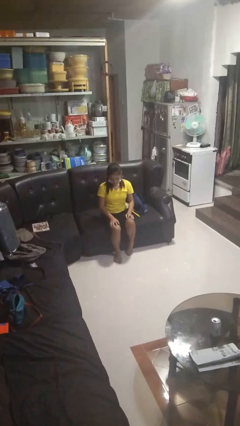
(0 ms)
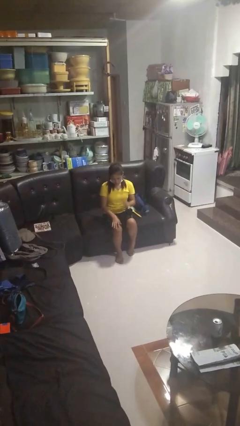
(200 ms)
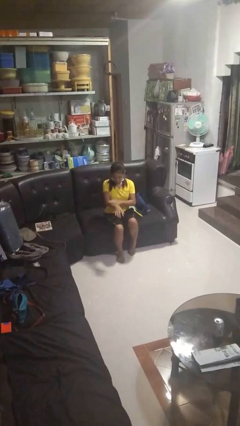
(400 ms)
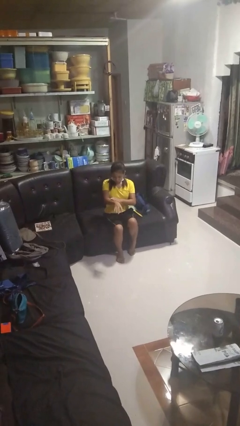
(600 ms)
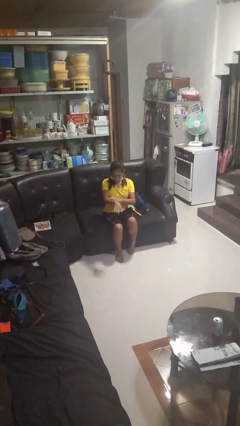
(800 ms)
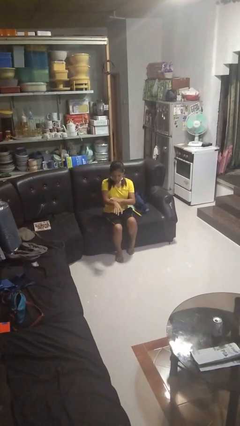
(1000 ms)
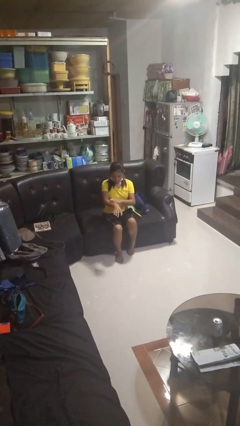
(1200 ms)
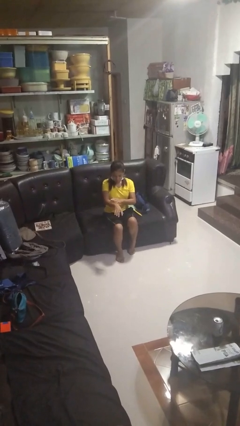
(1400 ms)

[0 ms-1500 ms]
person swats bug

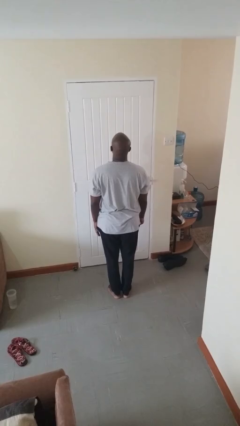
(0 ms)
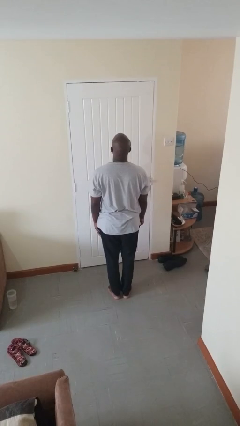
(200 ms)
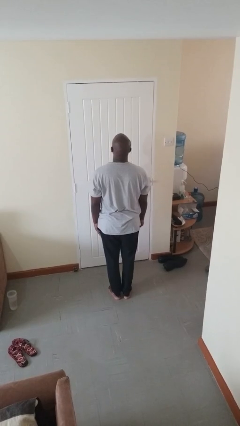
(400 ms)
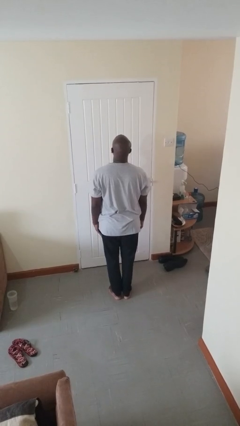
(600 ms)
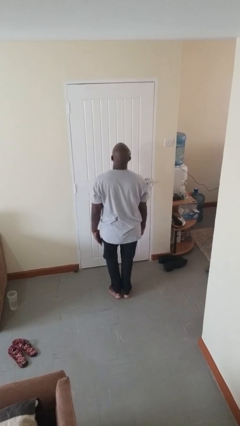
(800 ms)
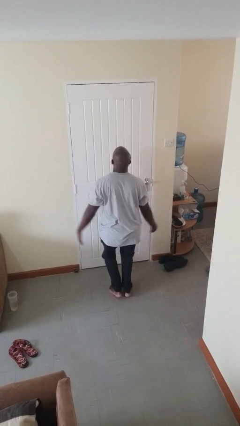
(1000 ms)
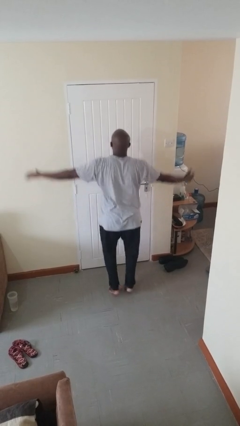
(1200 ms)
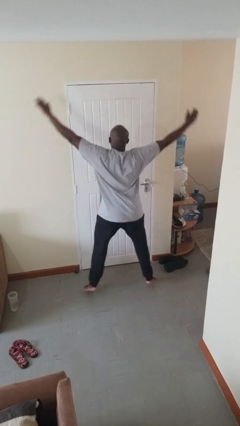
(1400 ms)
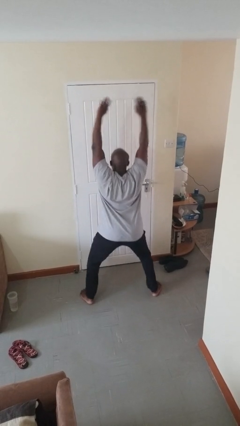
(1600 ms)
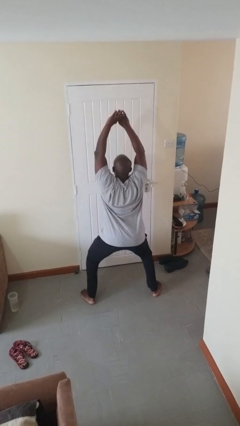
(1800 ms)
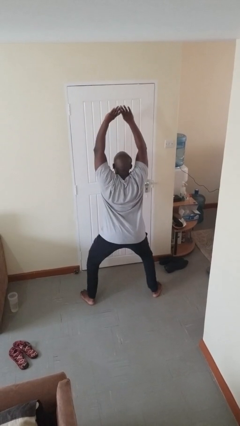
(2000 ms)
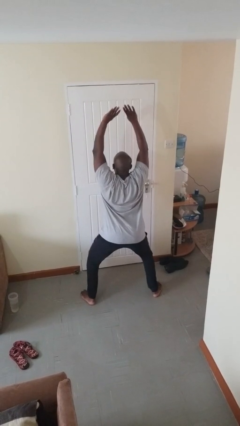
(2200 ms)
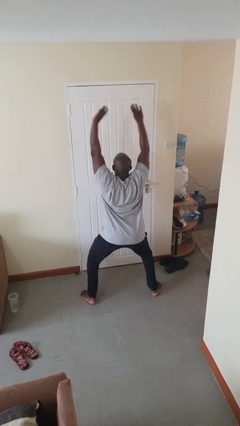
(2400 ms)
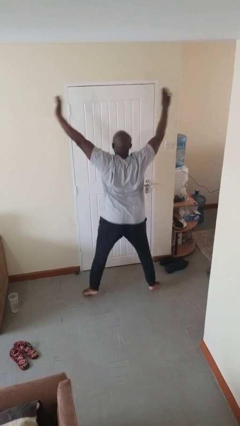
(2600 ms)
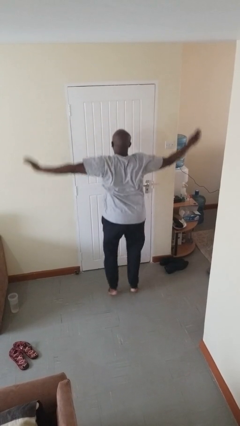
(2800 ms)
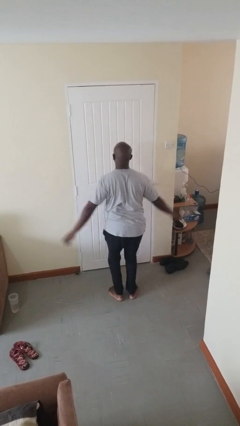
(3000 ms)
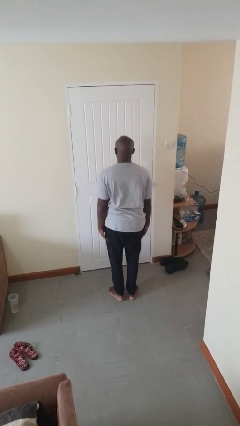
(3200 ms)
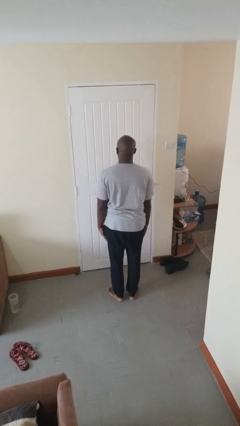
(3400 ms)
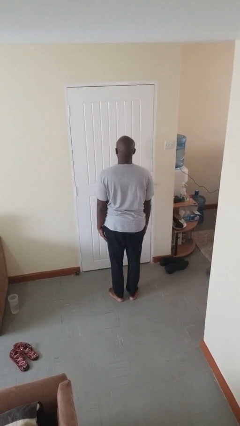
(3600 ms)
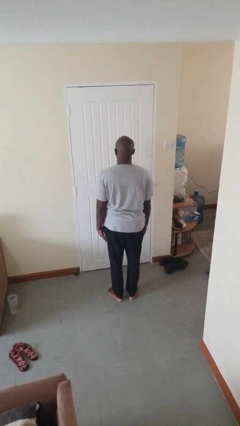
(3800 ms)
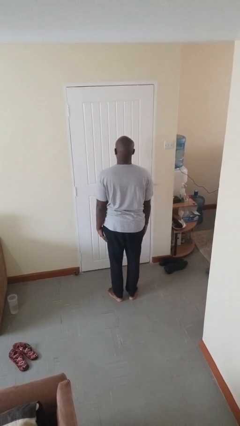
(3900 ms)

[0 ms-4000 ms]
person exercises with jumping jacks

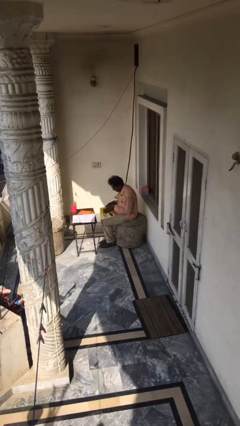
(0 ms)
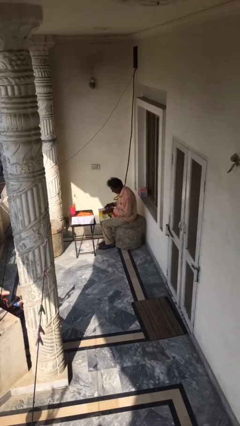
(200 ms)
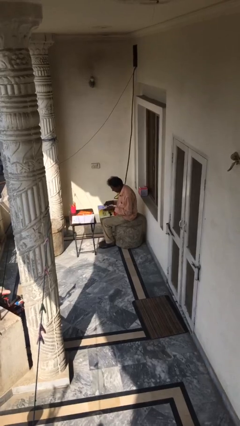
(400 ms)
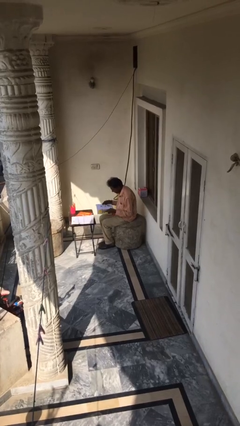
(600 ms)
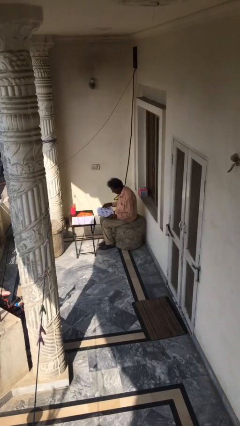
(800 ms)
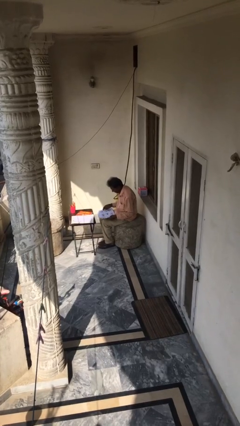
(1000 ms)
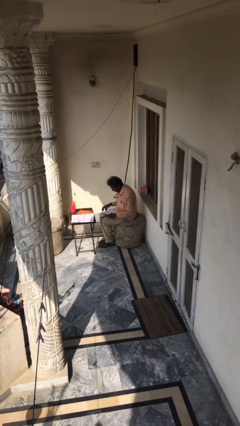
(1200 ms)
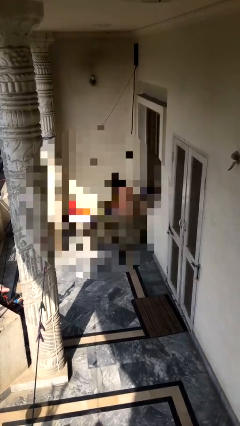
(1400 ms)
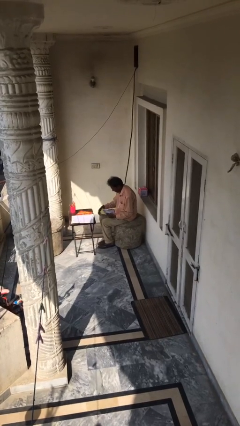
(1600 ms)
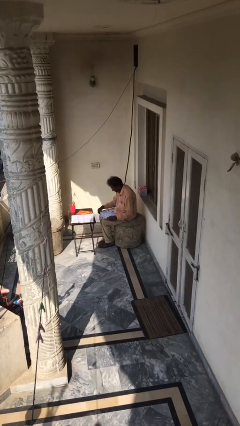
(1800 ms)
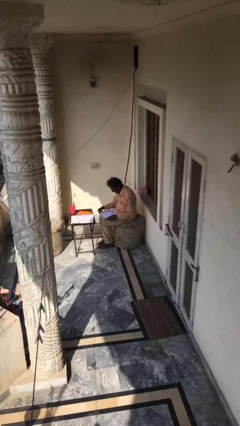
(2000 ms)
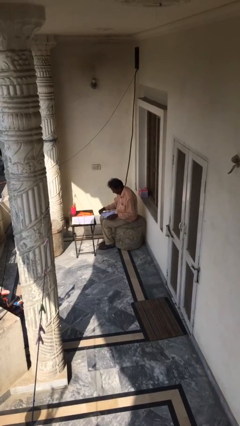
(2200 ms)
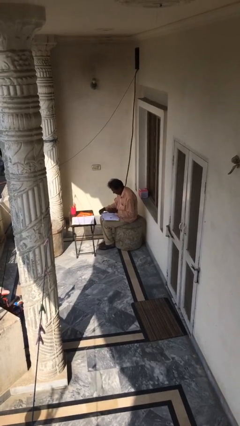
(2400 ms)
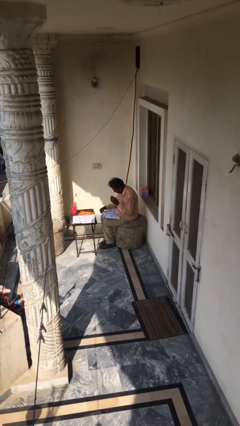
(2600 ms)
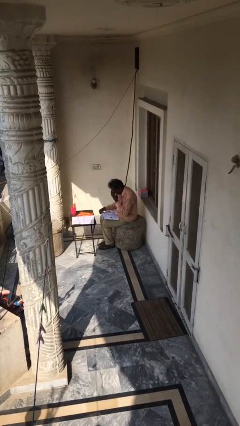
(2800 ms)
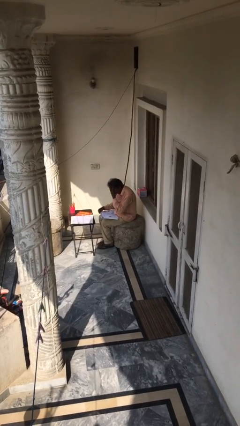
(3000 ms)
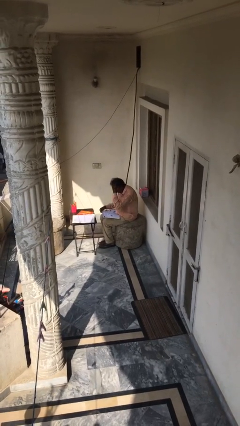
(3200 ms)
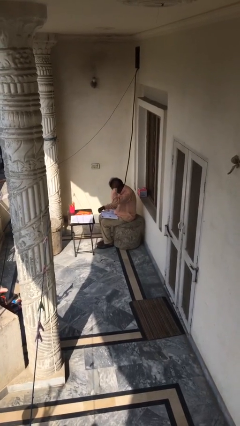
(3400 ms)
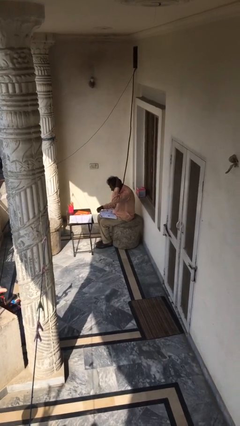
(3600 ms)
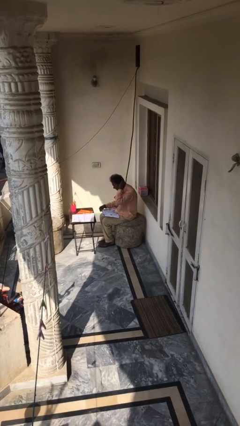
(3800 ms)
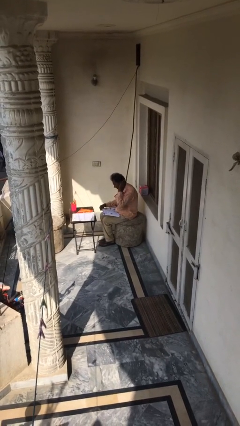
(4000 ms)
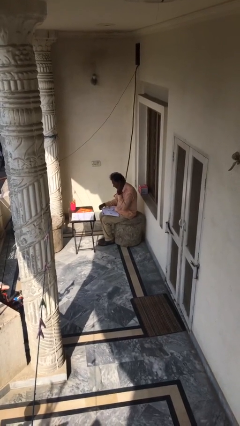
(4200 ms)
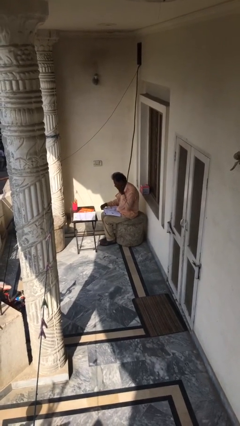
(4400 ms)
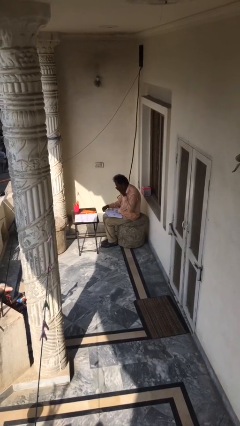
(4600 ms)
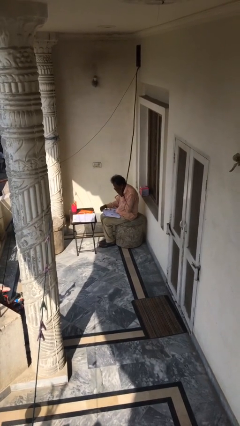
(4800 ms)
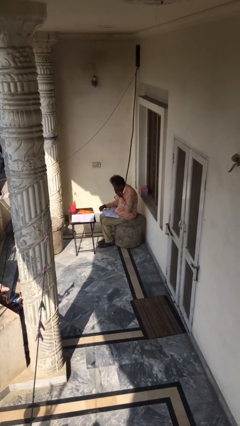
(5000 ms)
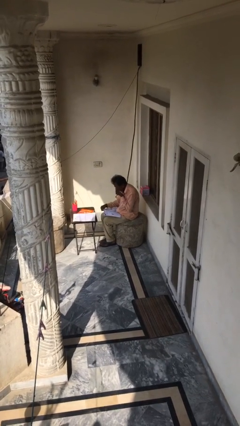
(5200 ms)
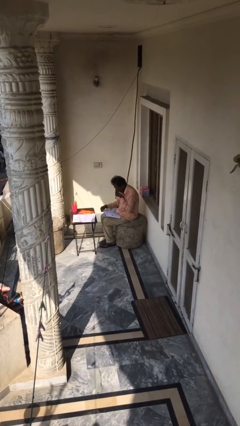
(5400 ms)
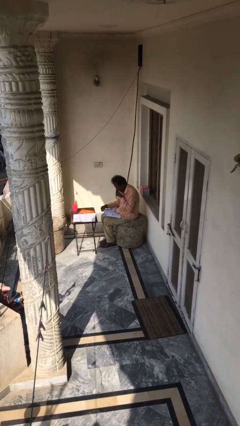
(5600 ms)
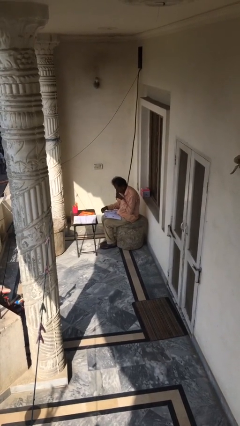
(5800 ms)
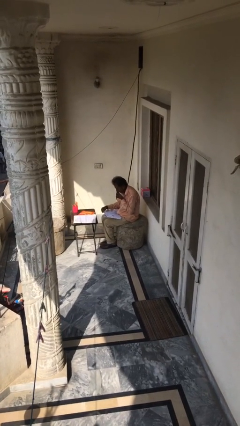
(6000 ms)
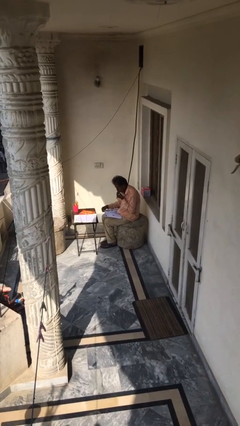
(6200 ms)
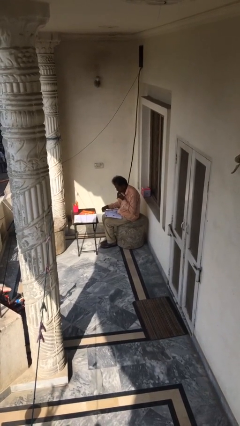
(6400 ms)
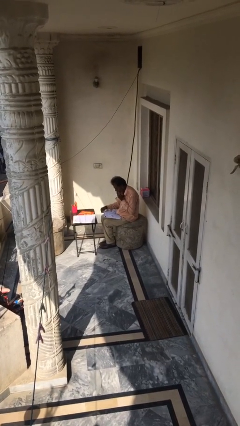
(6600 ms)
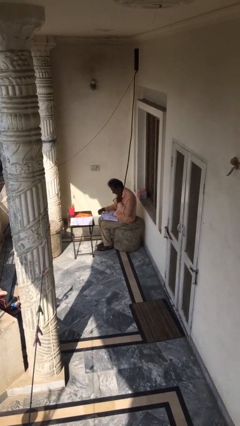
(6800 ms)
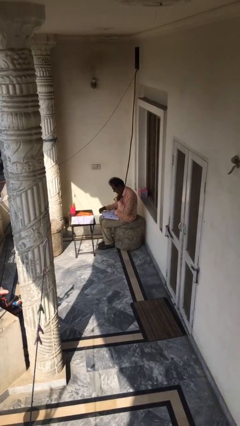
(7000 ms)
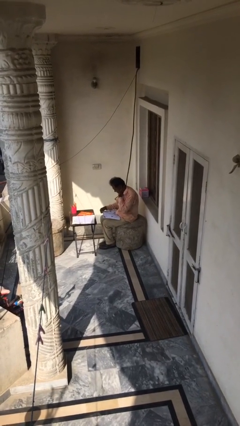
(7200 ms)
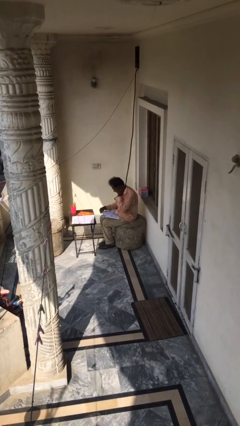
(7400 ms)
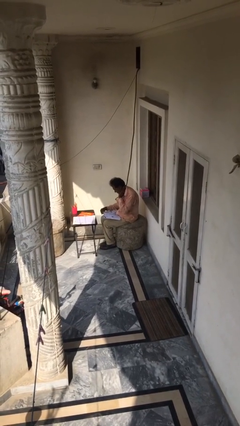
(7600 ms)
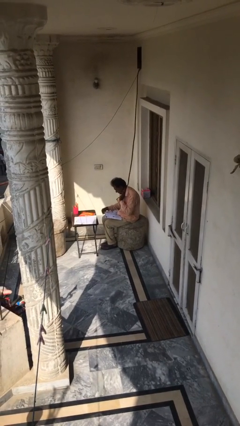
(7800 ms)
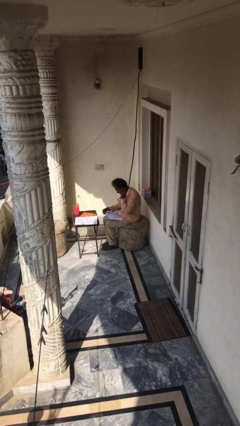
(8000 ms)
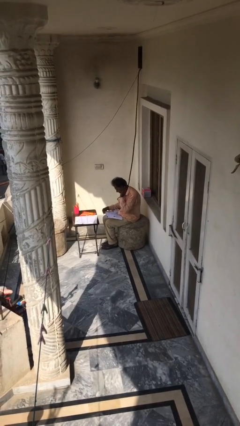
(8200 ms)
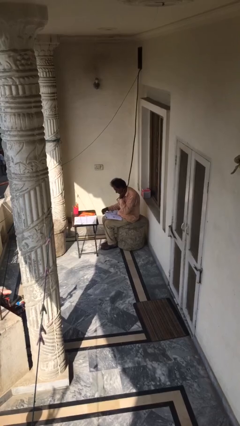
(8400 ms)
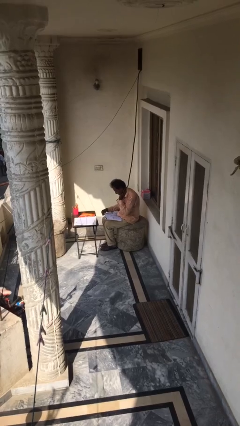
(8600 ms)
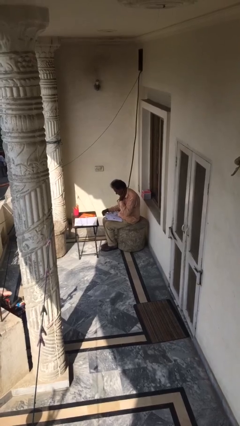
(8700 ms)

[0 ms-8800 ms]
person reads document

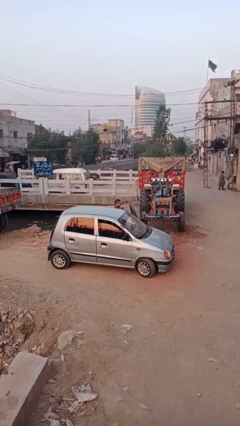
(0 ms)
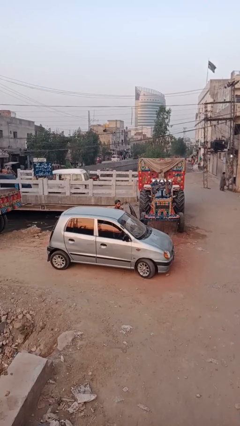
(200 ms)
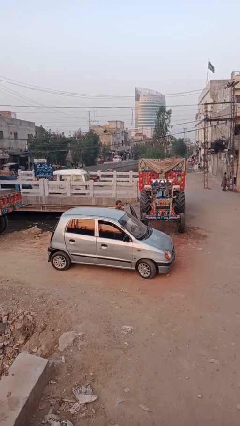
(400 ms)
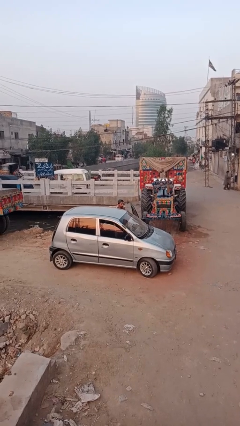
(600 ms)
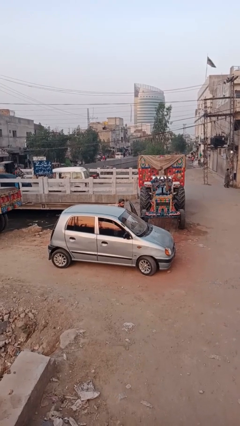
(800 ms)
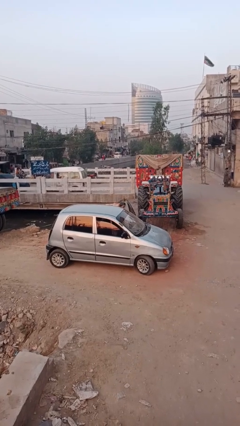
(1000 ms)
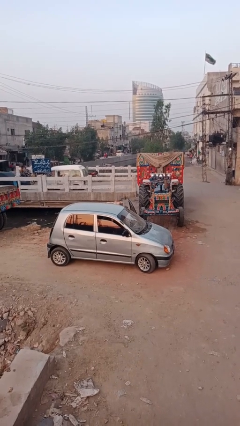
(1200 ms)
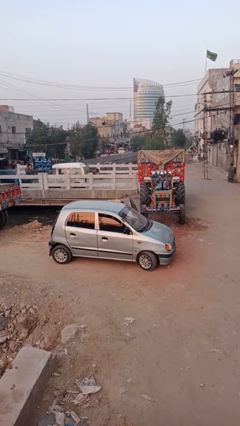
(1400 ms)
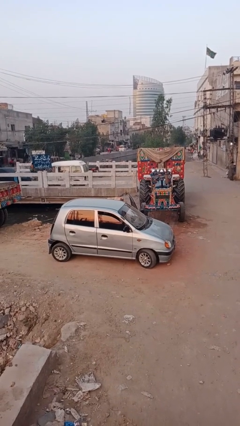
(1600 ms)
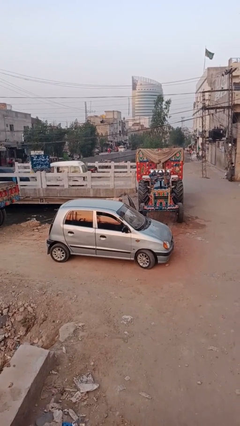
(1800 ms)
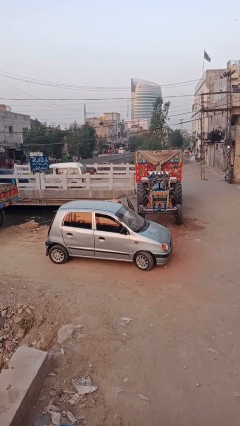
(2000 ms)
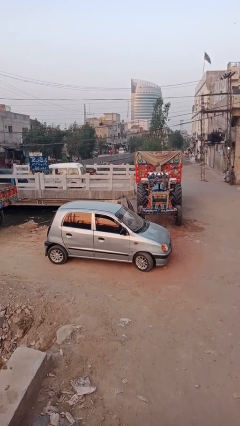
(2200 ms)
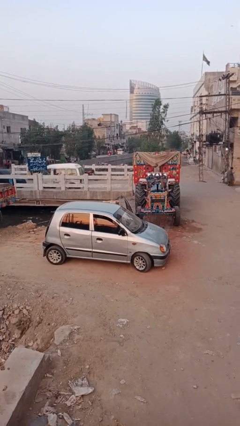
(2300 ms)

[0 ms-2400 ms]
person enters car

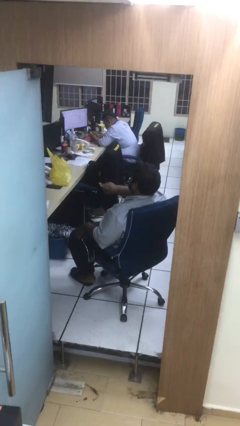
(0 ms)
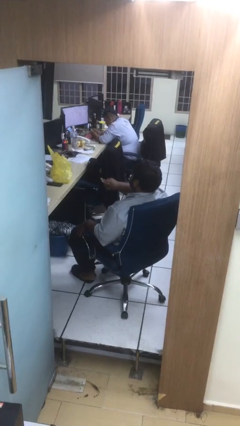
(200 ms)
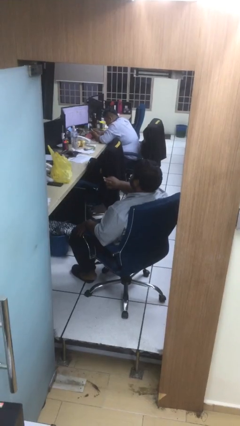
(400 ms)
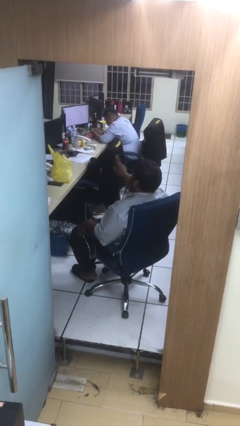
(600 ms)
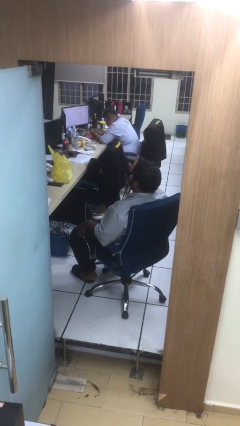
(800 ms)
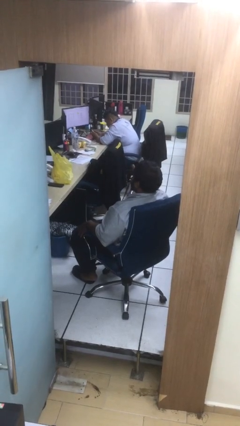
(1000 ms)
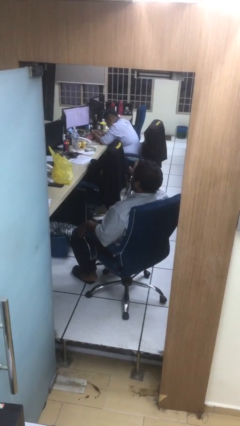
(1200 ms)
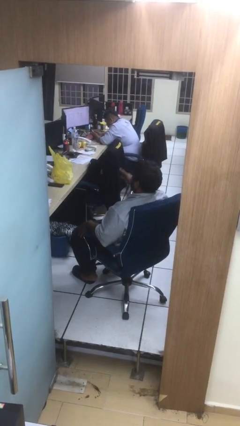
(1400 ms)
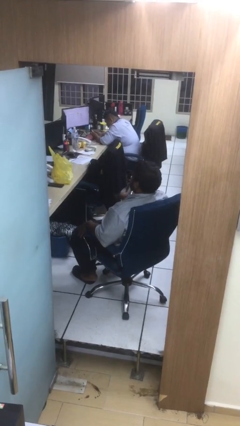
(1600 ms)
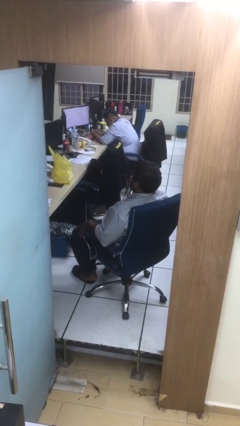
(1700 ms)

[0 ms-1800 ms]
person gestures swipe right
